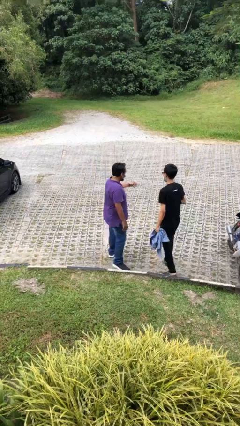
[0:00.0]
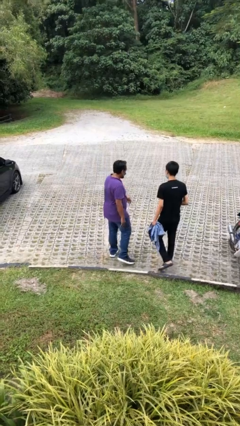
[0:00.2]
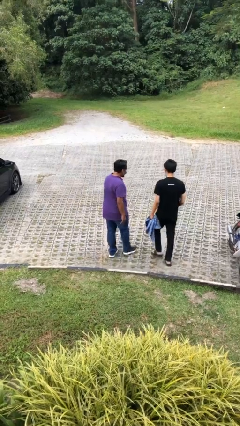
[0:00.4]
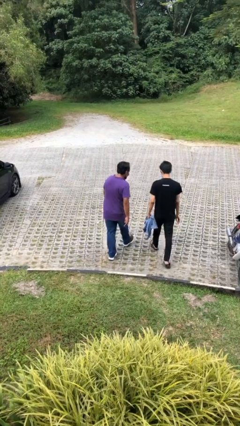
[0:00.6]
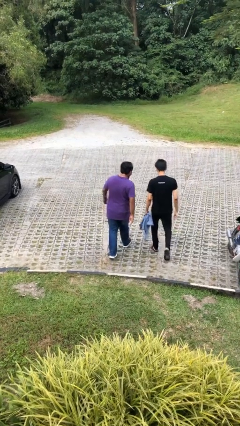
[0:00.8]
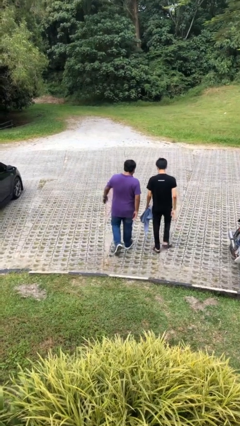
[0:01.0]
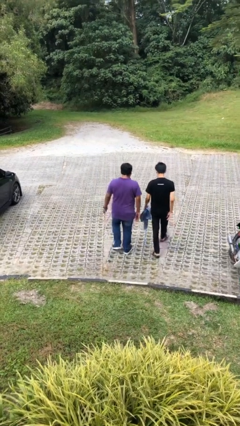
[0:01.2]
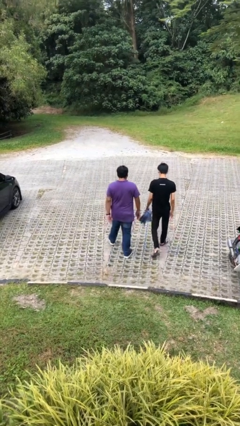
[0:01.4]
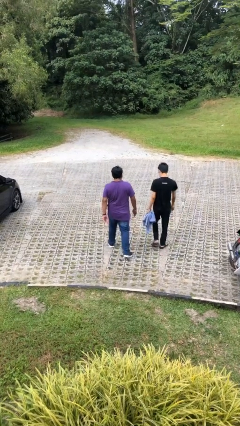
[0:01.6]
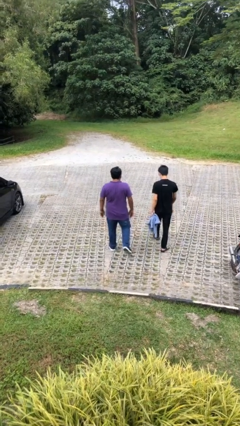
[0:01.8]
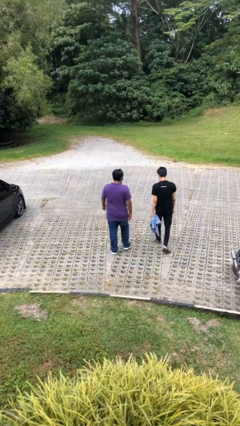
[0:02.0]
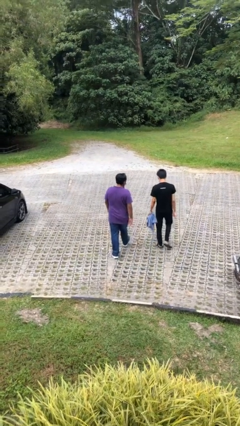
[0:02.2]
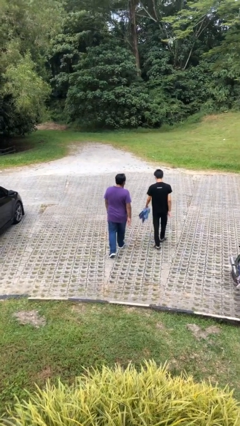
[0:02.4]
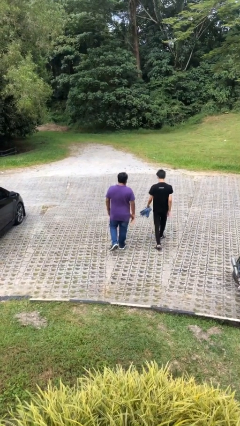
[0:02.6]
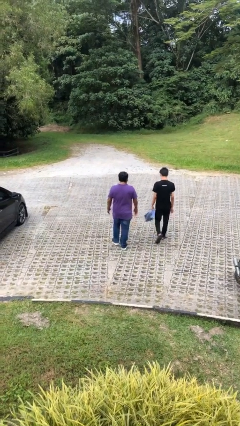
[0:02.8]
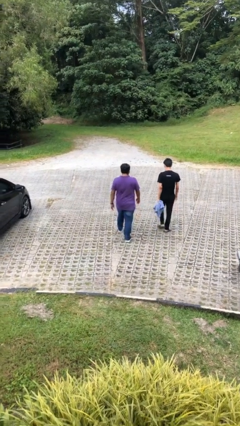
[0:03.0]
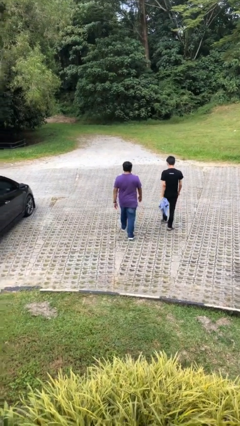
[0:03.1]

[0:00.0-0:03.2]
person talks to person

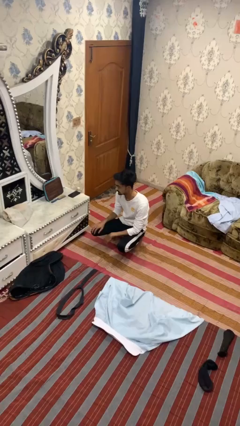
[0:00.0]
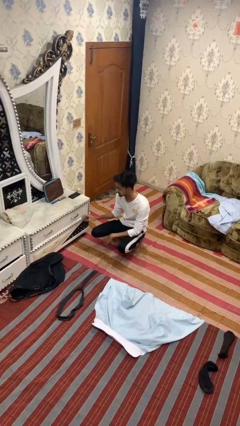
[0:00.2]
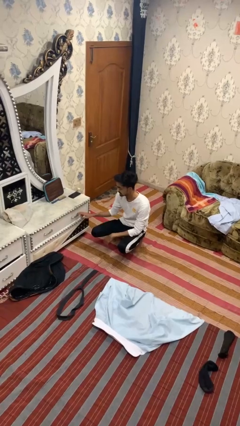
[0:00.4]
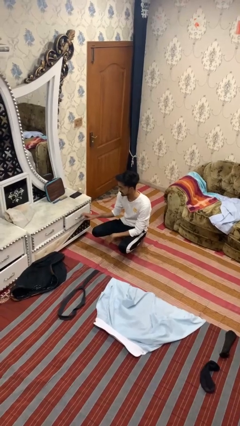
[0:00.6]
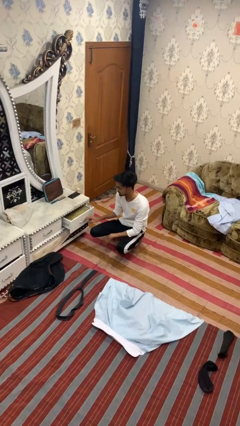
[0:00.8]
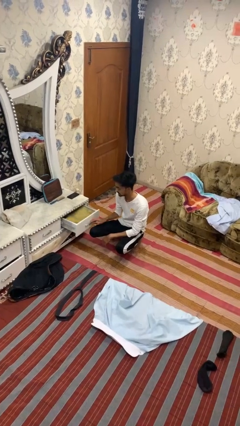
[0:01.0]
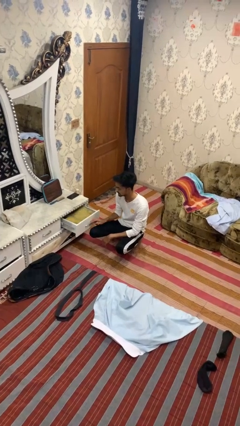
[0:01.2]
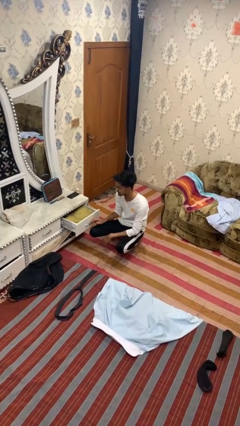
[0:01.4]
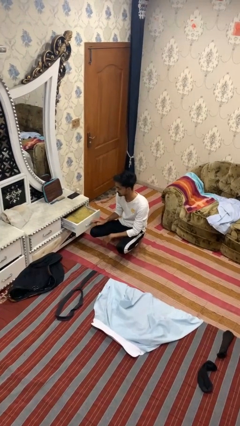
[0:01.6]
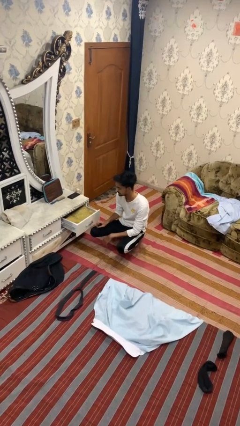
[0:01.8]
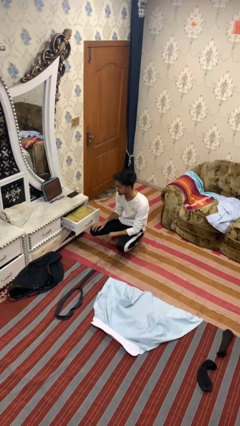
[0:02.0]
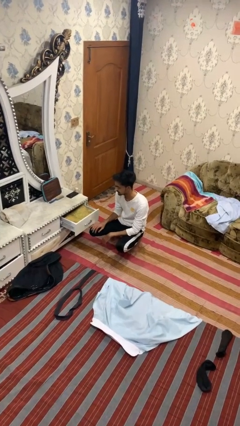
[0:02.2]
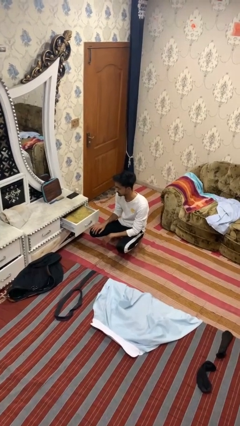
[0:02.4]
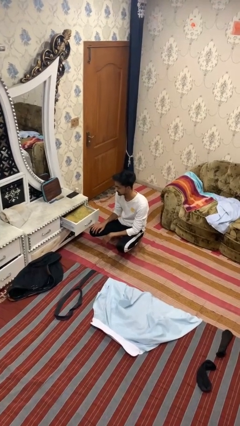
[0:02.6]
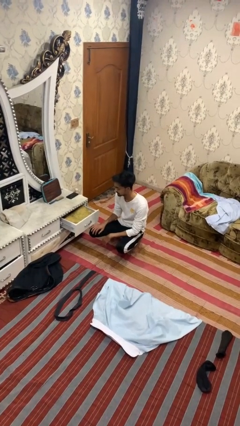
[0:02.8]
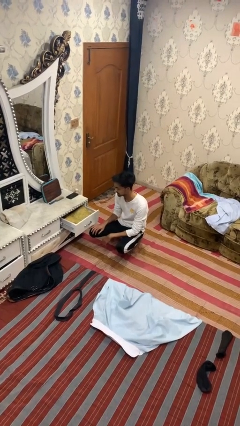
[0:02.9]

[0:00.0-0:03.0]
person opens dresser drawer

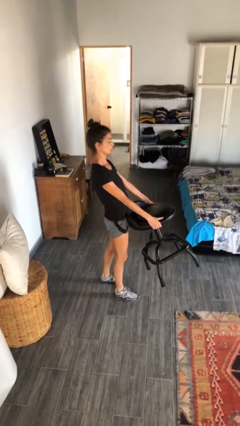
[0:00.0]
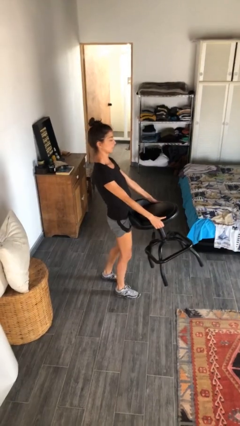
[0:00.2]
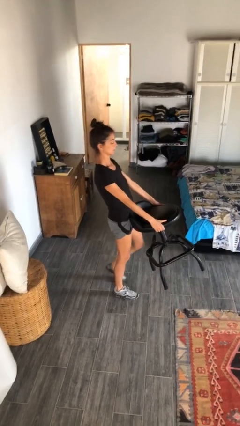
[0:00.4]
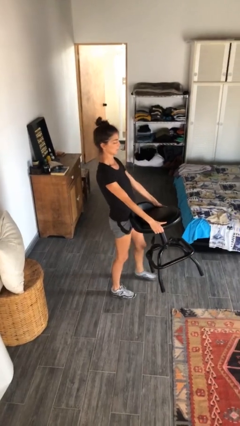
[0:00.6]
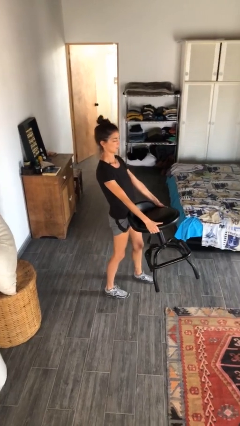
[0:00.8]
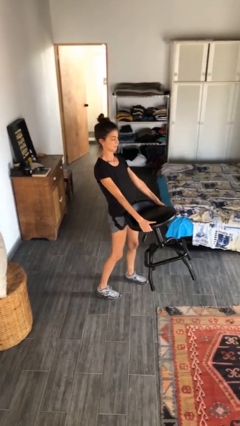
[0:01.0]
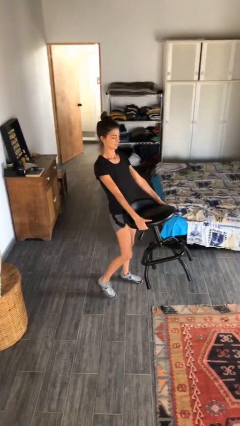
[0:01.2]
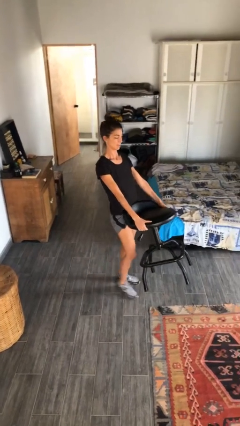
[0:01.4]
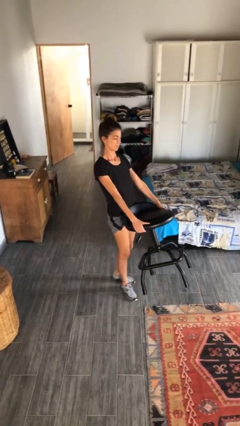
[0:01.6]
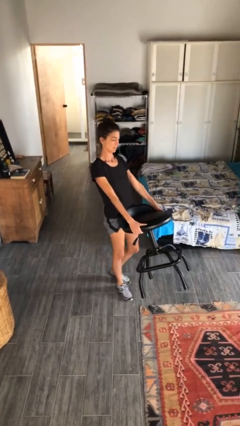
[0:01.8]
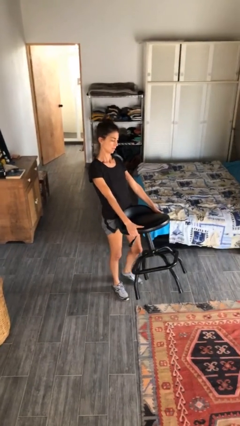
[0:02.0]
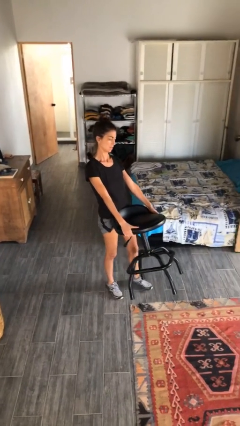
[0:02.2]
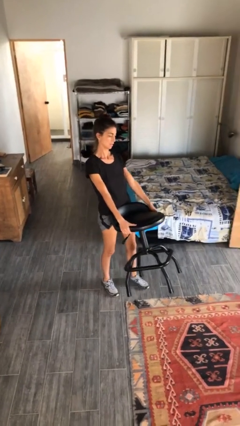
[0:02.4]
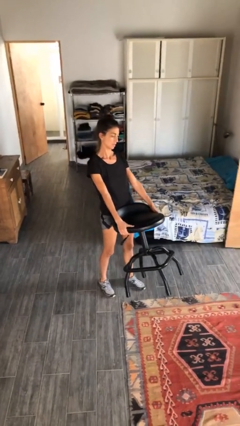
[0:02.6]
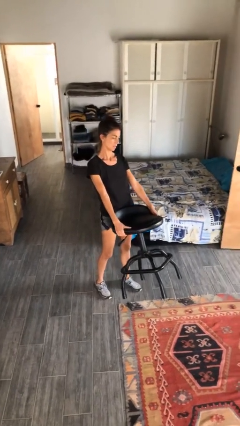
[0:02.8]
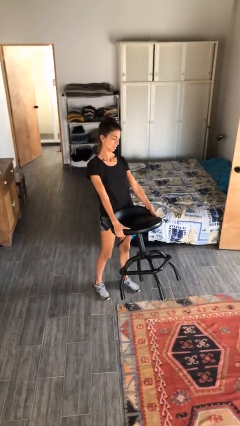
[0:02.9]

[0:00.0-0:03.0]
person carries furniture

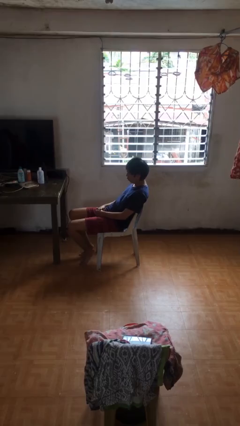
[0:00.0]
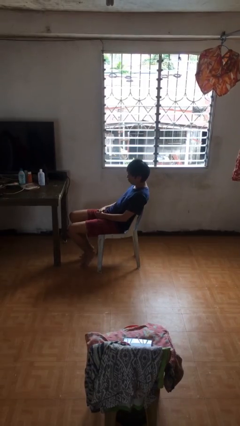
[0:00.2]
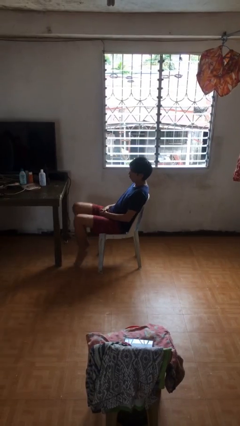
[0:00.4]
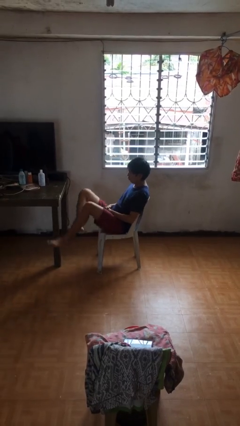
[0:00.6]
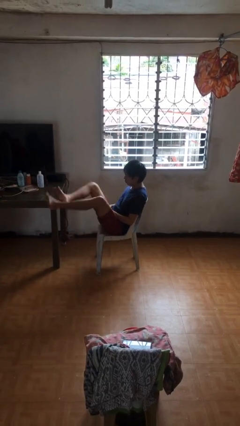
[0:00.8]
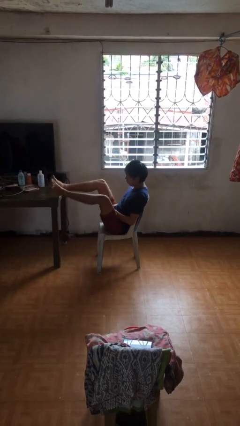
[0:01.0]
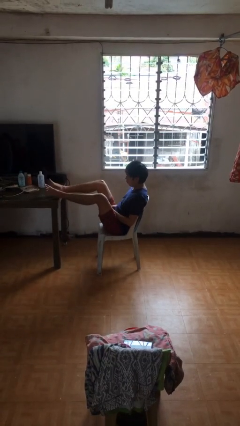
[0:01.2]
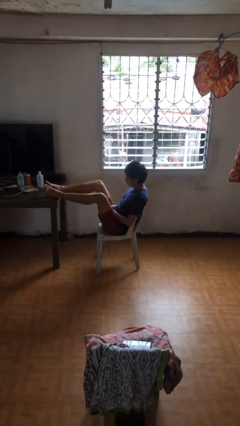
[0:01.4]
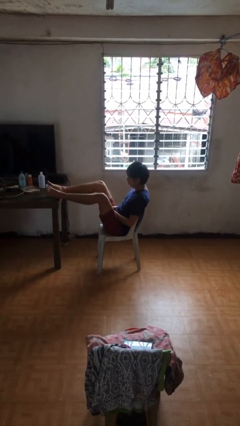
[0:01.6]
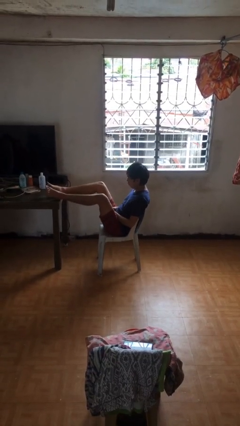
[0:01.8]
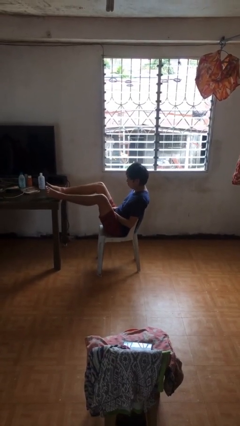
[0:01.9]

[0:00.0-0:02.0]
person puts feet up

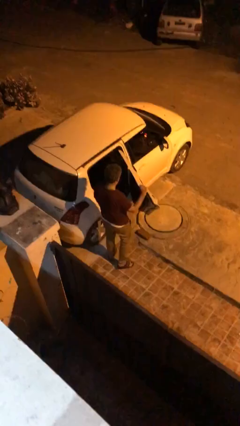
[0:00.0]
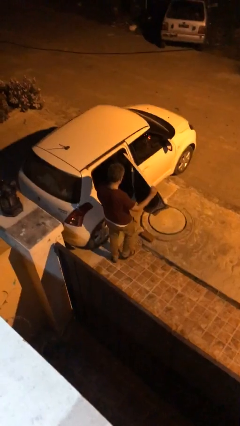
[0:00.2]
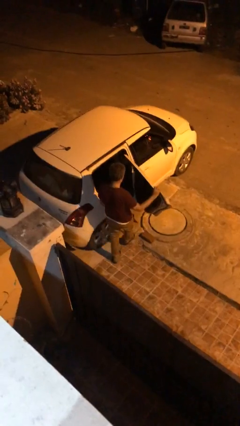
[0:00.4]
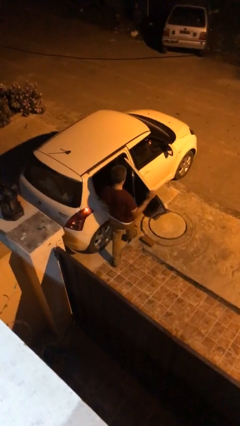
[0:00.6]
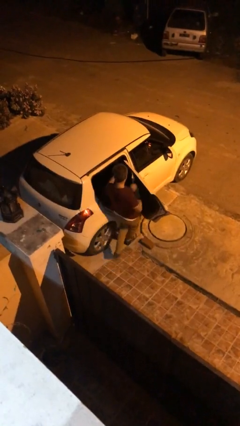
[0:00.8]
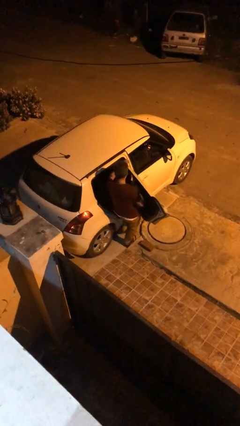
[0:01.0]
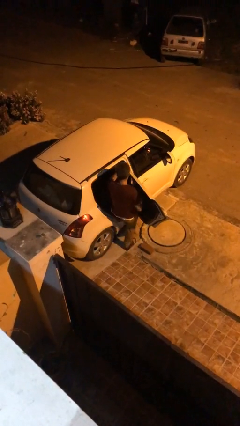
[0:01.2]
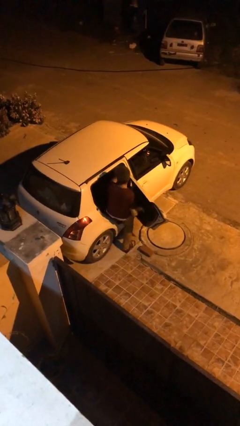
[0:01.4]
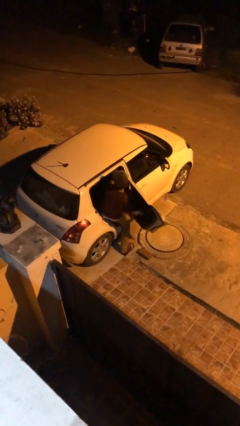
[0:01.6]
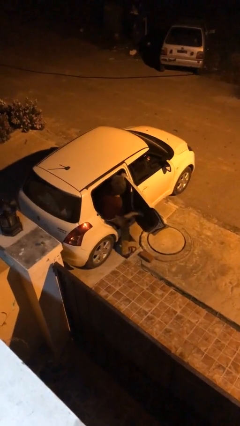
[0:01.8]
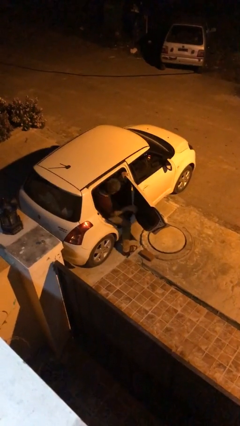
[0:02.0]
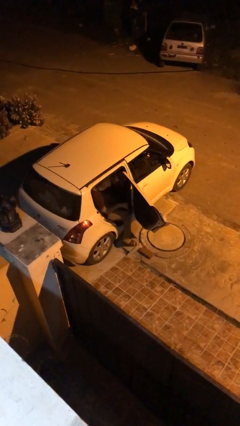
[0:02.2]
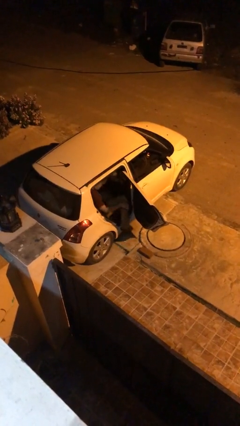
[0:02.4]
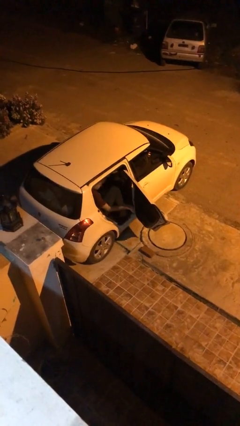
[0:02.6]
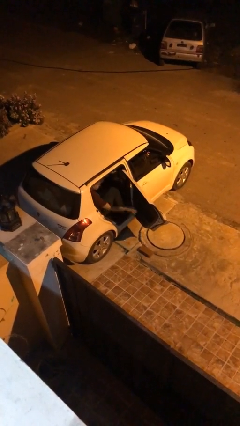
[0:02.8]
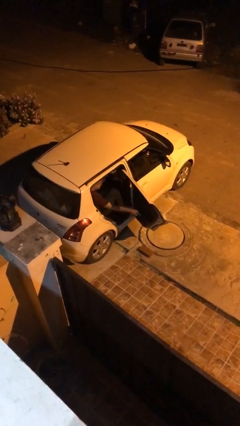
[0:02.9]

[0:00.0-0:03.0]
person enters car

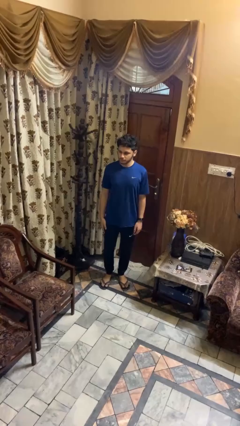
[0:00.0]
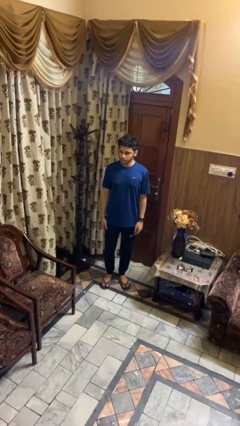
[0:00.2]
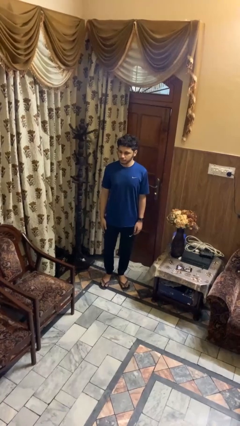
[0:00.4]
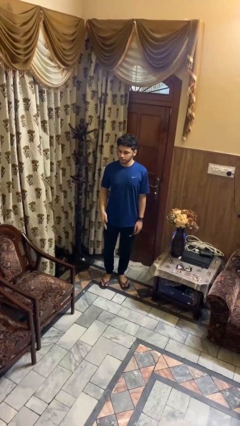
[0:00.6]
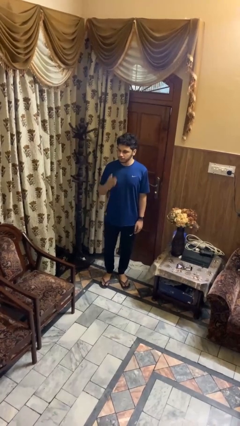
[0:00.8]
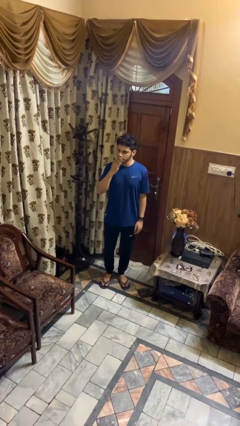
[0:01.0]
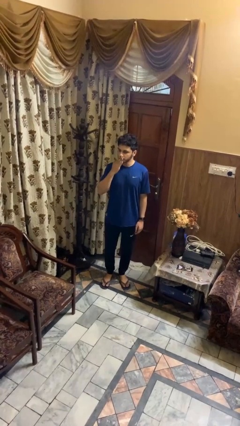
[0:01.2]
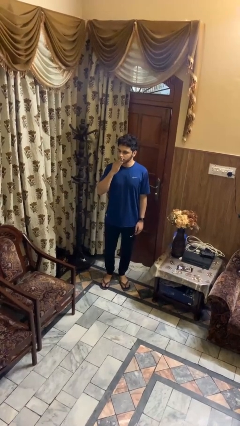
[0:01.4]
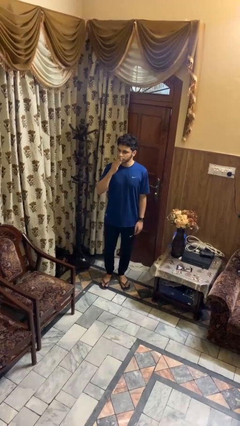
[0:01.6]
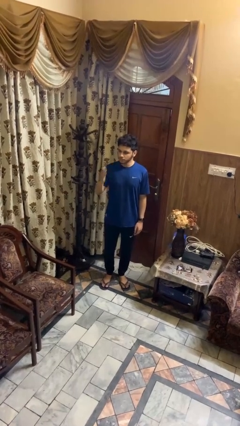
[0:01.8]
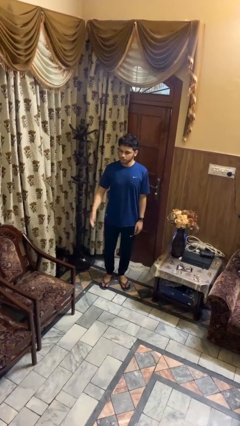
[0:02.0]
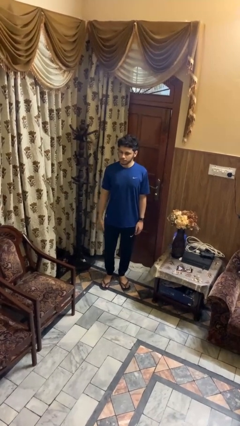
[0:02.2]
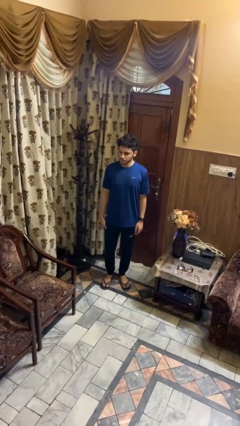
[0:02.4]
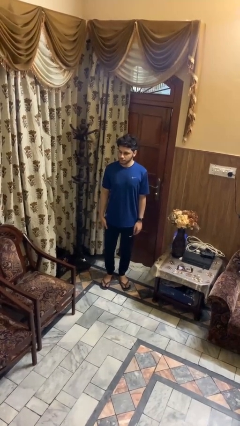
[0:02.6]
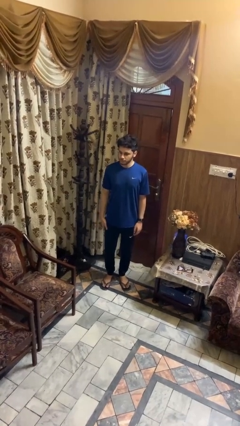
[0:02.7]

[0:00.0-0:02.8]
person gestures blow kiss

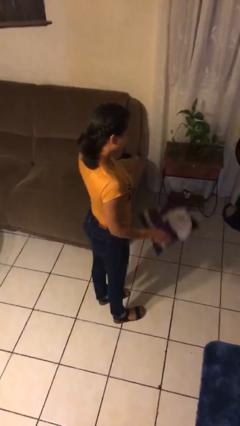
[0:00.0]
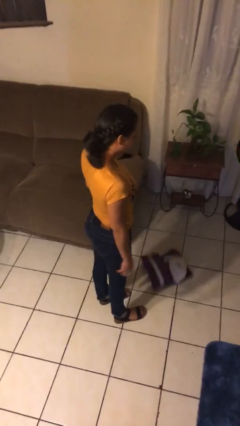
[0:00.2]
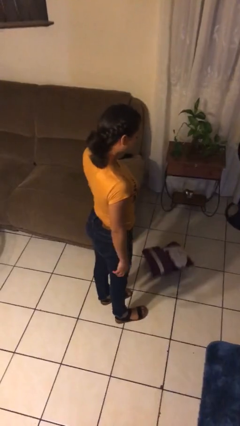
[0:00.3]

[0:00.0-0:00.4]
person throws object to ground
